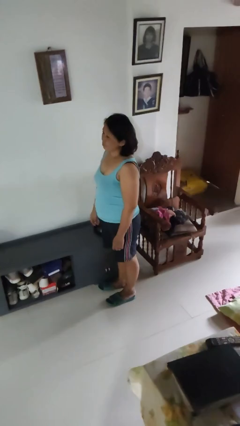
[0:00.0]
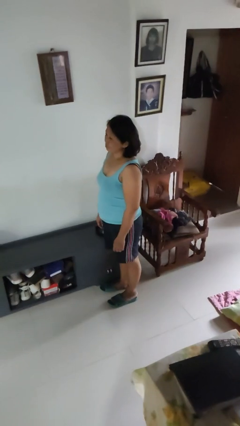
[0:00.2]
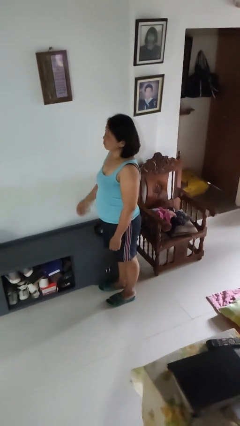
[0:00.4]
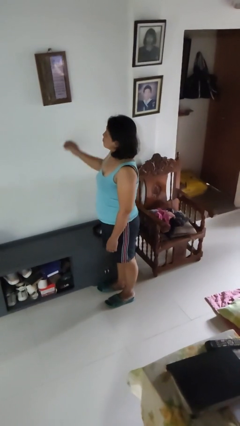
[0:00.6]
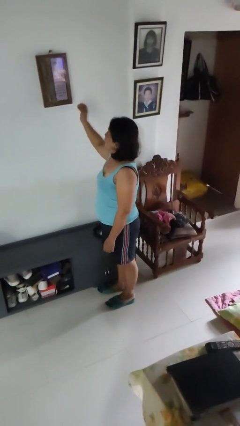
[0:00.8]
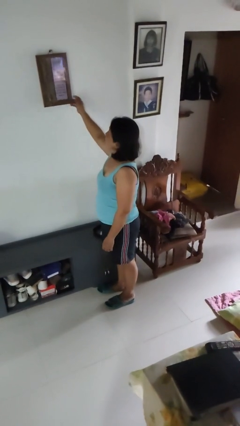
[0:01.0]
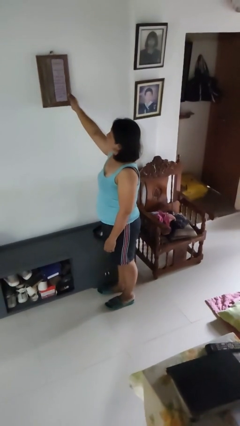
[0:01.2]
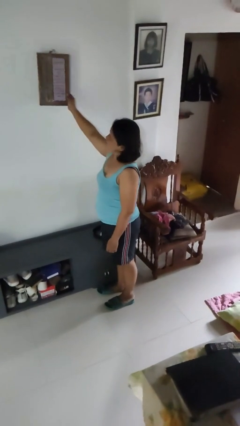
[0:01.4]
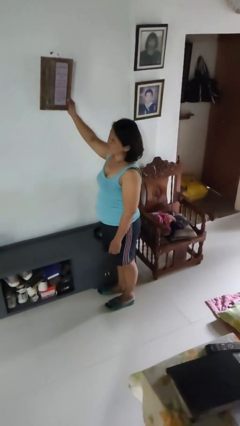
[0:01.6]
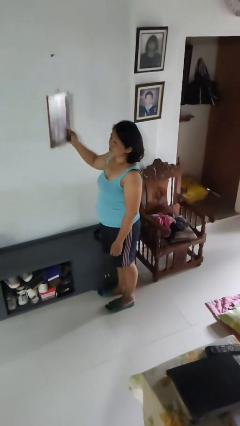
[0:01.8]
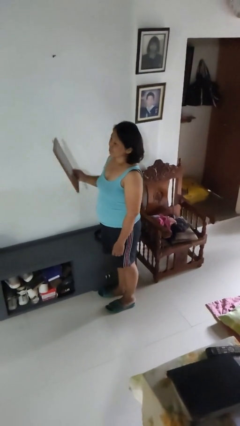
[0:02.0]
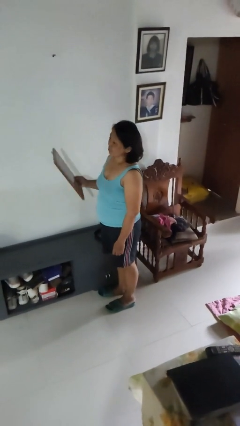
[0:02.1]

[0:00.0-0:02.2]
person takes down picture frame

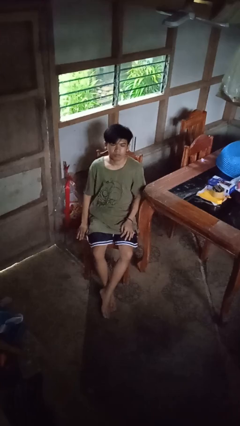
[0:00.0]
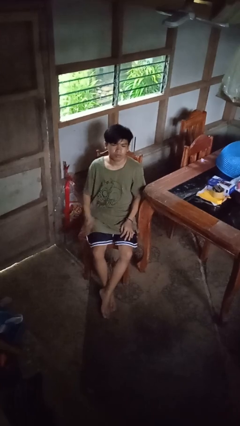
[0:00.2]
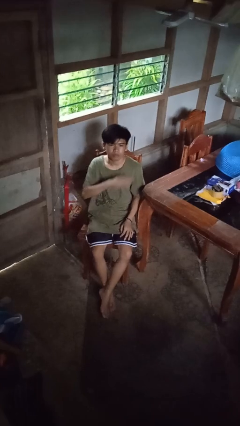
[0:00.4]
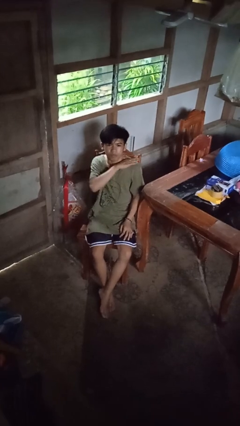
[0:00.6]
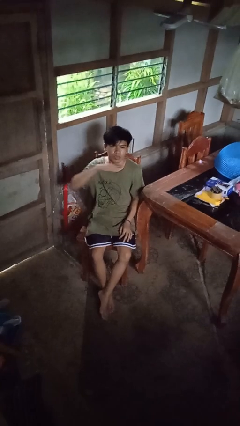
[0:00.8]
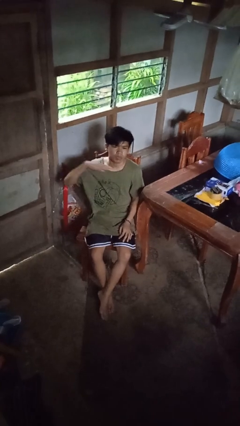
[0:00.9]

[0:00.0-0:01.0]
person gestures cut

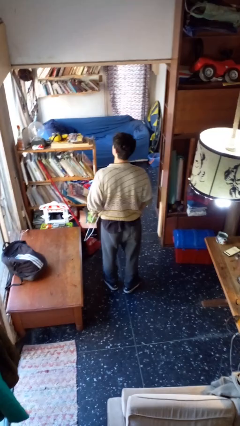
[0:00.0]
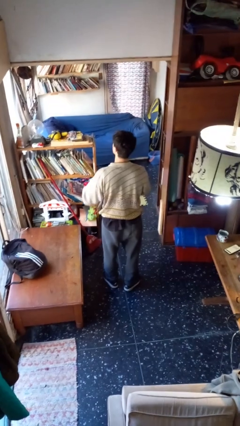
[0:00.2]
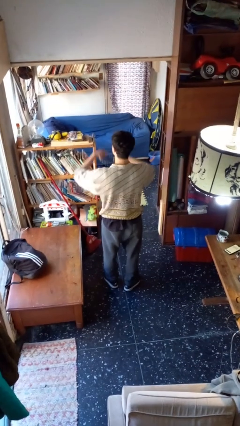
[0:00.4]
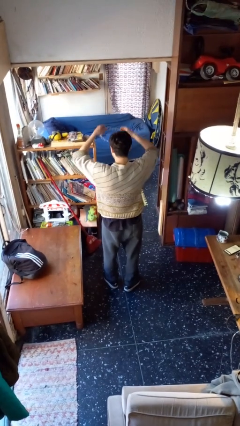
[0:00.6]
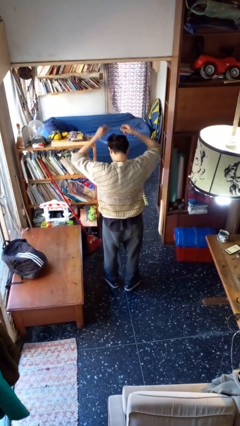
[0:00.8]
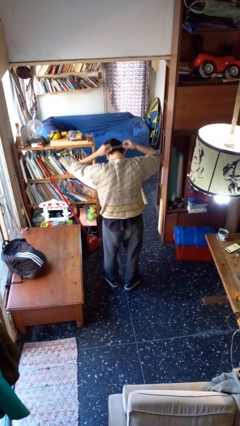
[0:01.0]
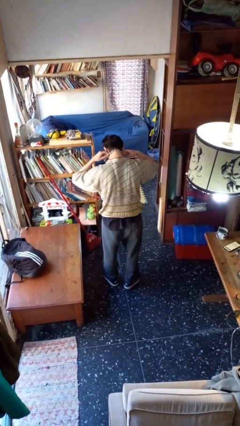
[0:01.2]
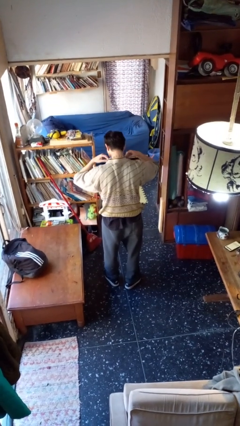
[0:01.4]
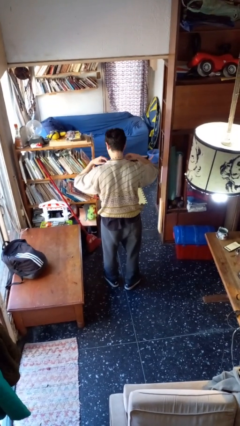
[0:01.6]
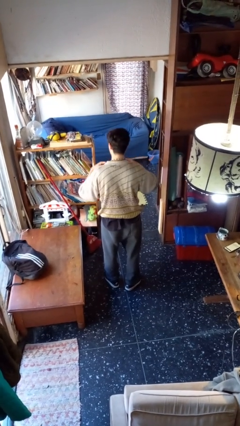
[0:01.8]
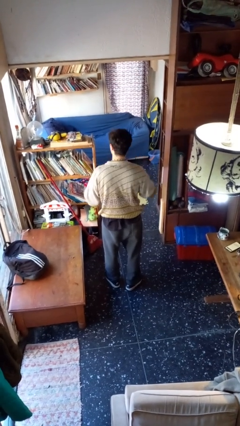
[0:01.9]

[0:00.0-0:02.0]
person puts on necklace

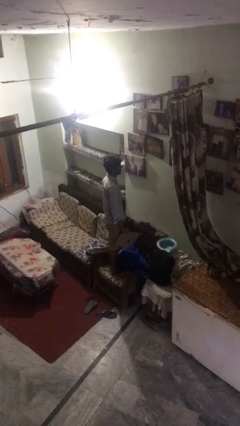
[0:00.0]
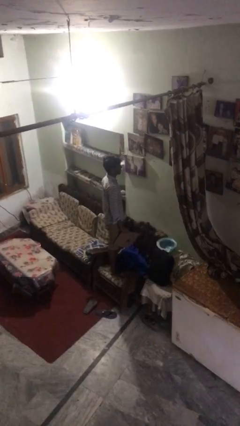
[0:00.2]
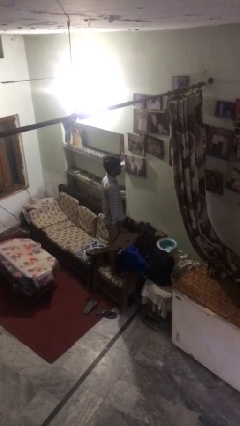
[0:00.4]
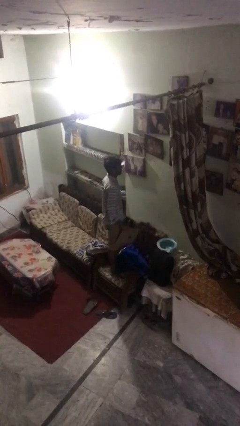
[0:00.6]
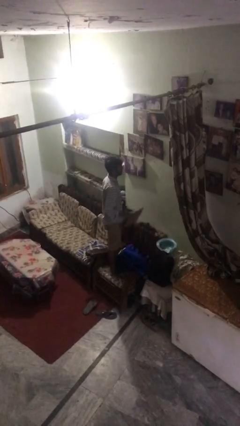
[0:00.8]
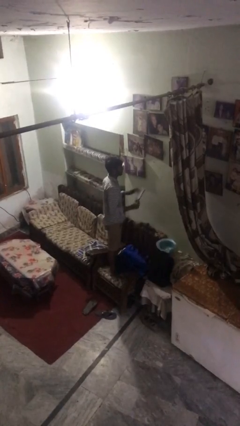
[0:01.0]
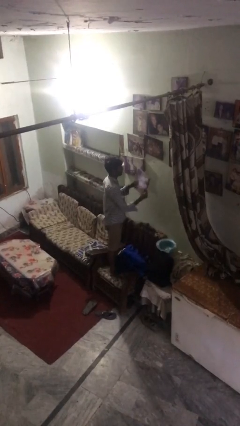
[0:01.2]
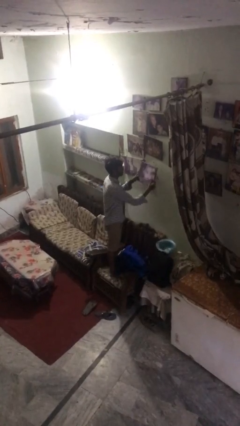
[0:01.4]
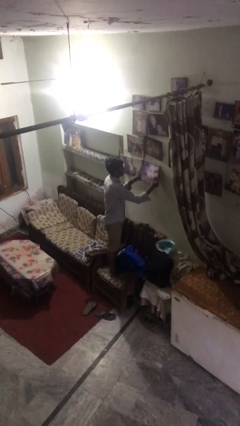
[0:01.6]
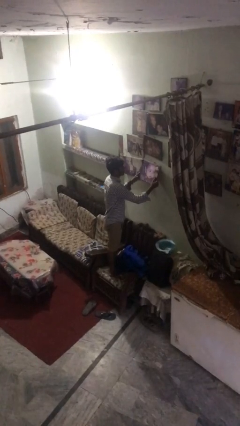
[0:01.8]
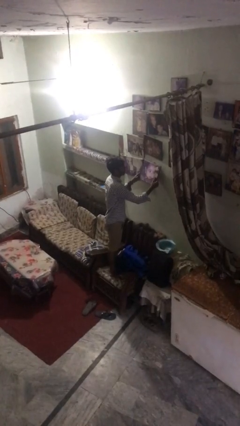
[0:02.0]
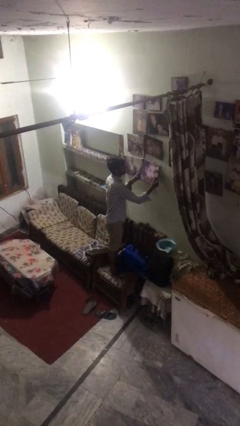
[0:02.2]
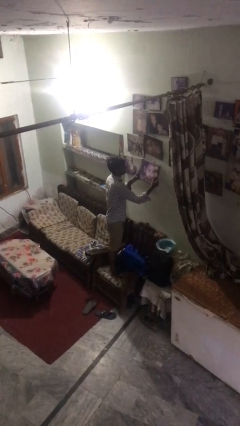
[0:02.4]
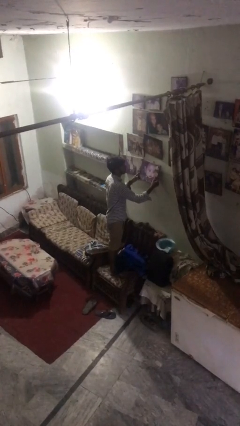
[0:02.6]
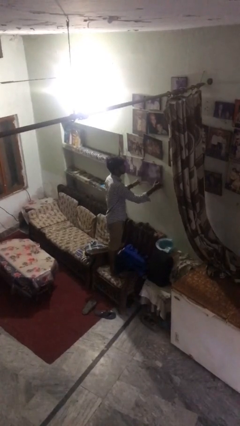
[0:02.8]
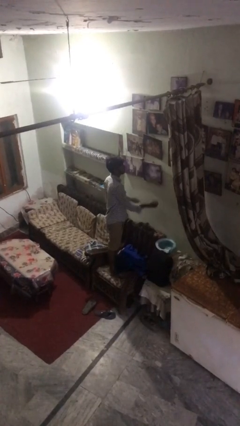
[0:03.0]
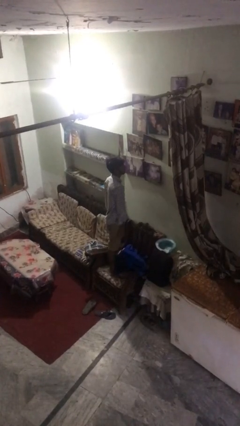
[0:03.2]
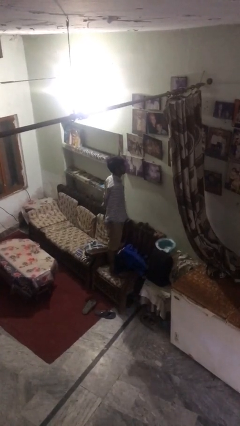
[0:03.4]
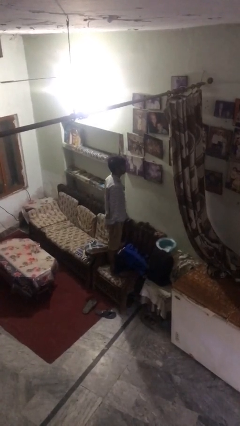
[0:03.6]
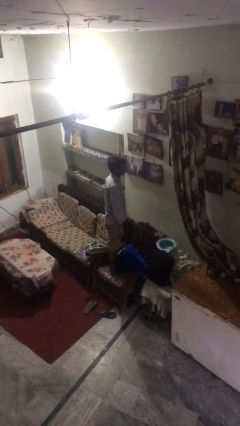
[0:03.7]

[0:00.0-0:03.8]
person puts up picture frame

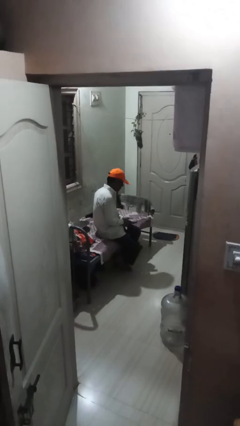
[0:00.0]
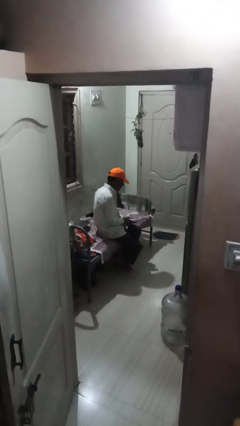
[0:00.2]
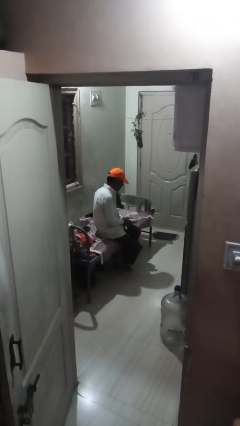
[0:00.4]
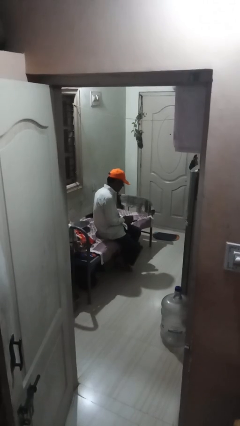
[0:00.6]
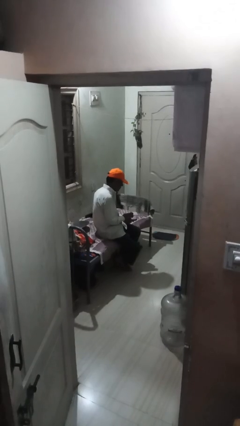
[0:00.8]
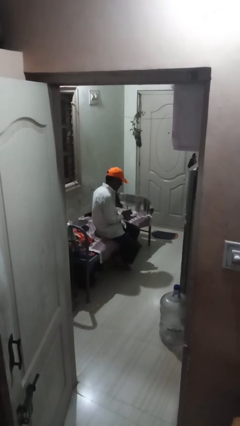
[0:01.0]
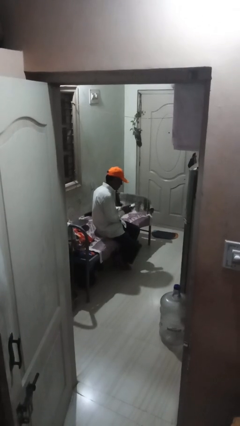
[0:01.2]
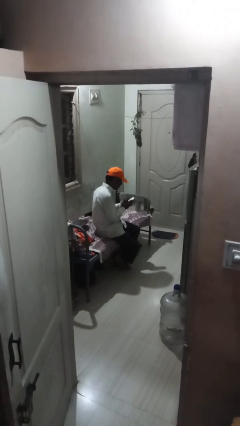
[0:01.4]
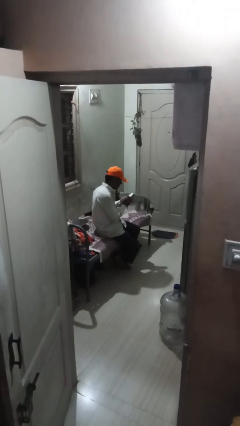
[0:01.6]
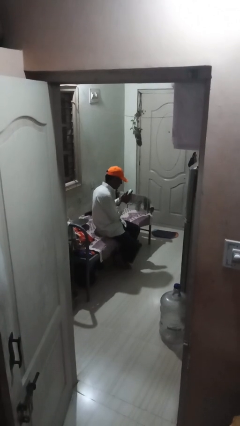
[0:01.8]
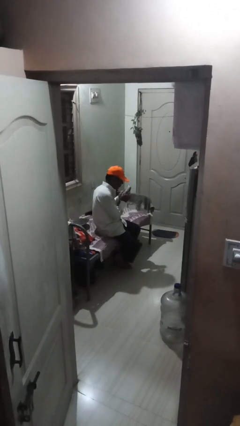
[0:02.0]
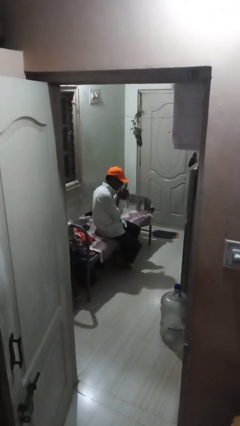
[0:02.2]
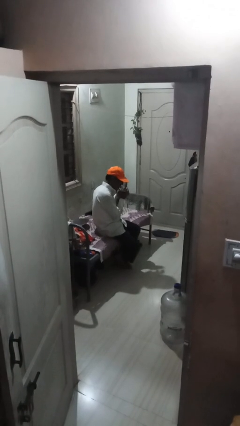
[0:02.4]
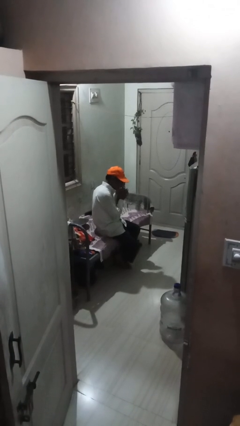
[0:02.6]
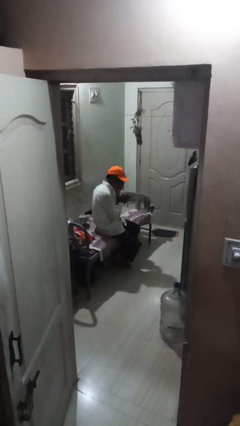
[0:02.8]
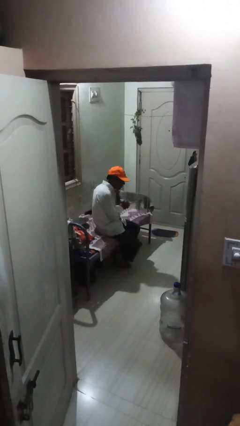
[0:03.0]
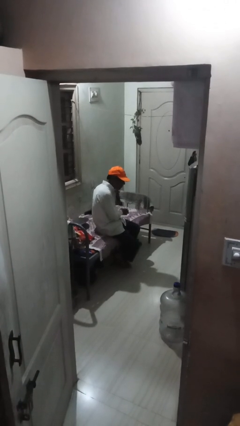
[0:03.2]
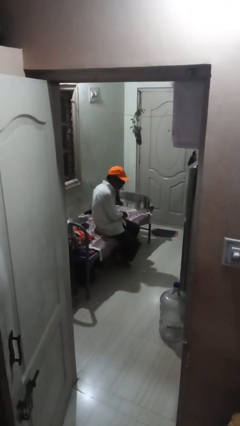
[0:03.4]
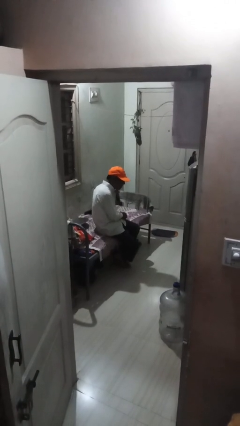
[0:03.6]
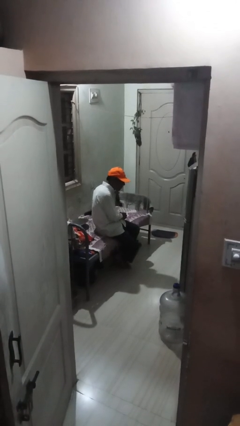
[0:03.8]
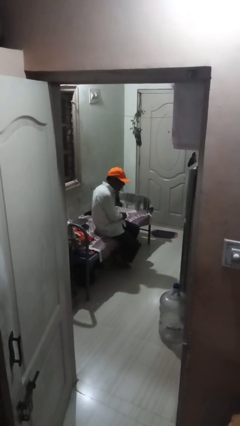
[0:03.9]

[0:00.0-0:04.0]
person taps object with finger

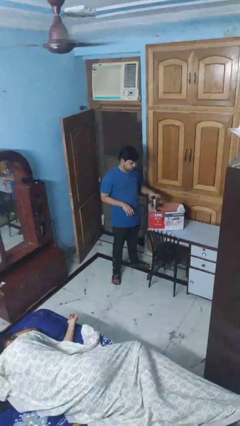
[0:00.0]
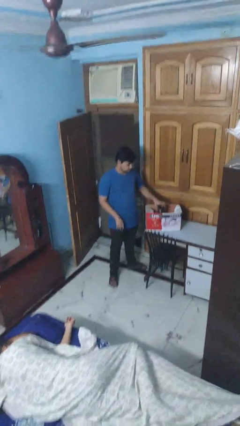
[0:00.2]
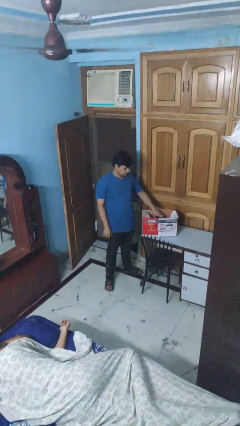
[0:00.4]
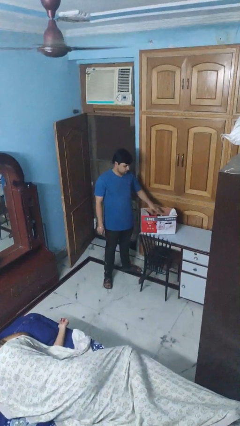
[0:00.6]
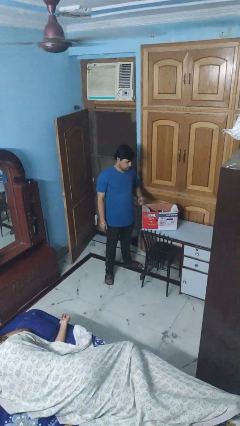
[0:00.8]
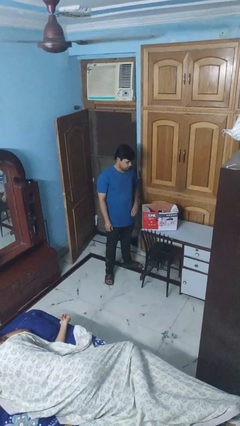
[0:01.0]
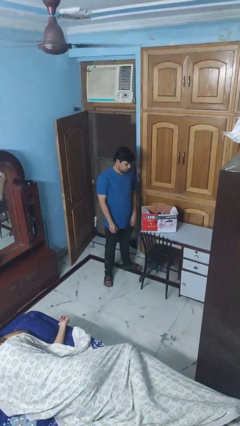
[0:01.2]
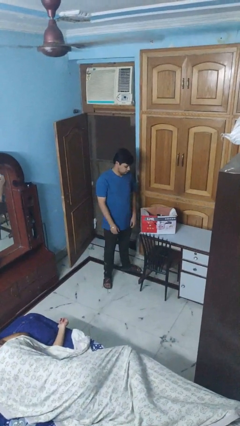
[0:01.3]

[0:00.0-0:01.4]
person puts object into box

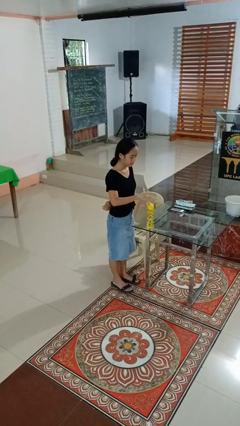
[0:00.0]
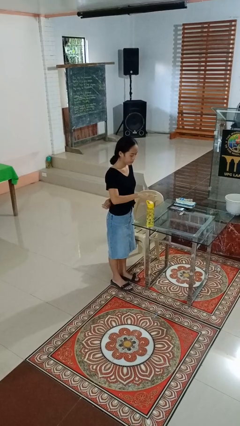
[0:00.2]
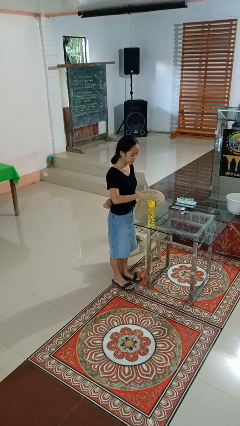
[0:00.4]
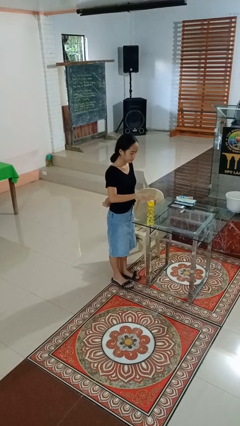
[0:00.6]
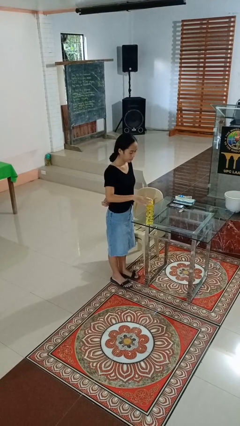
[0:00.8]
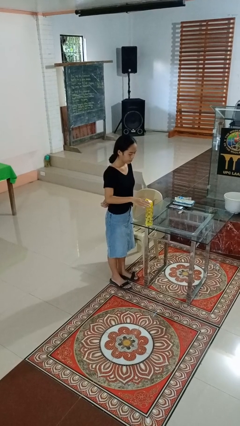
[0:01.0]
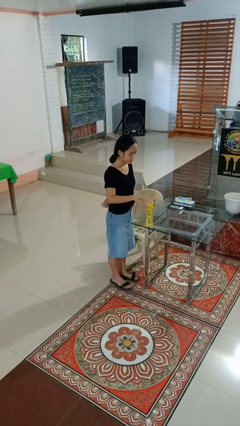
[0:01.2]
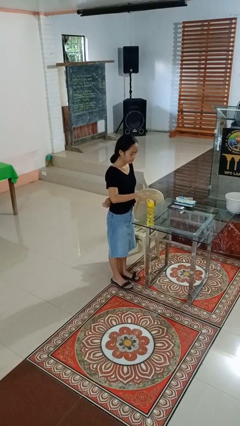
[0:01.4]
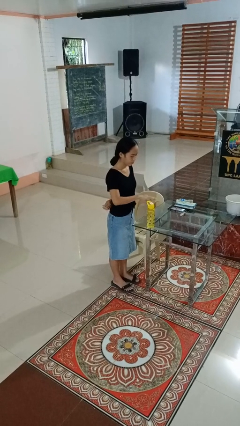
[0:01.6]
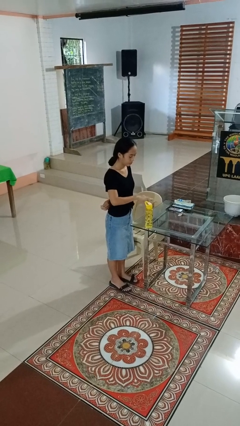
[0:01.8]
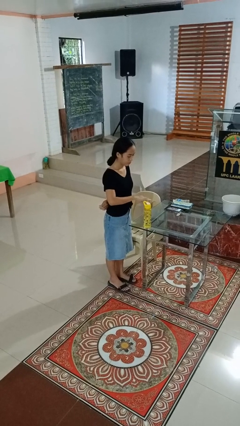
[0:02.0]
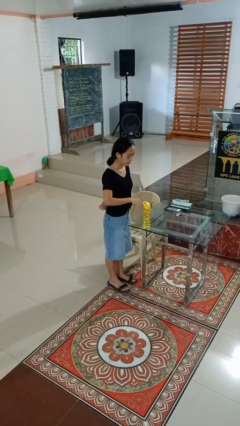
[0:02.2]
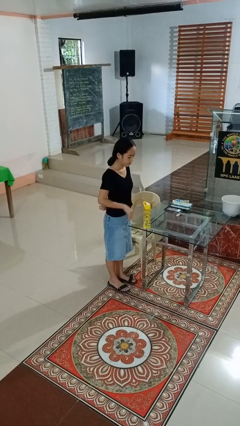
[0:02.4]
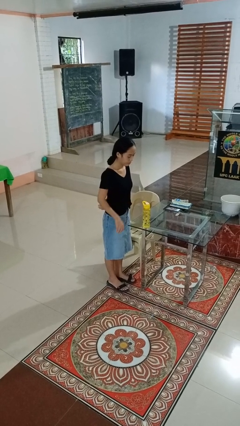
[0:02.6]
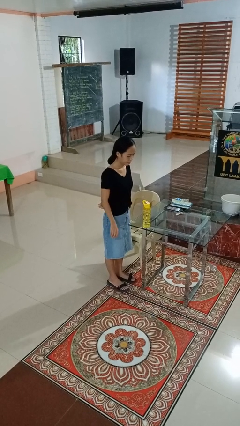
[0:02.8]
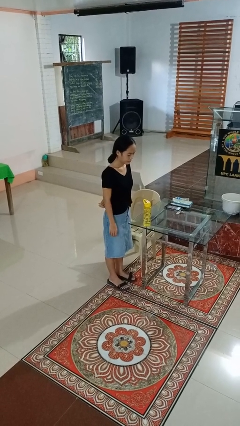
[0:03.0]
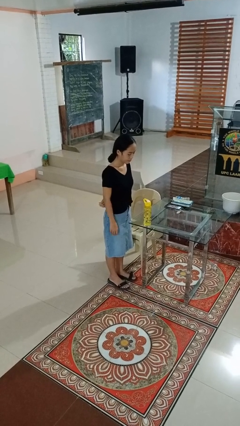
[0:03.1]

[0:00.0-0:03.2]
person waves hand over object
